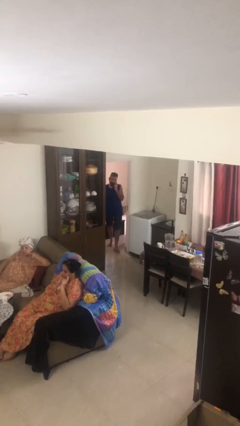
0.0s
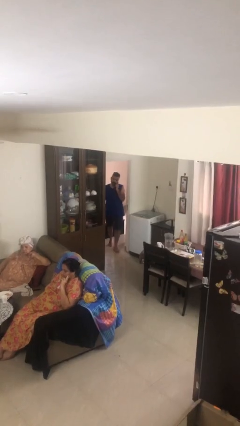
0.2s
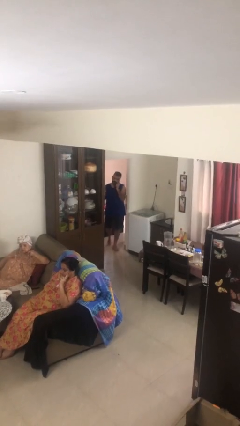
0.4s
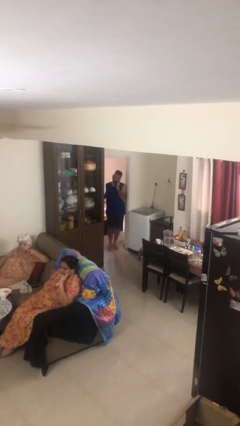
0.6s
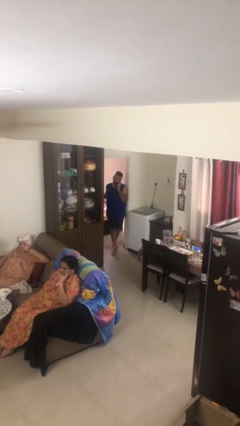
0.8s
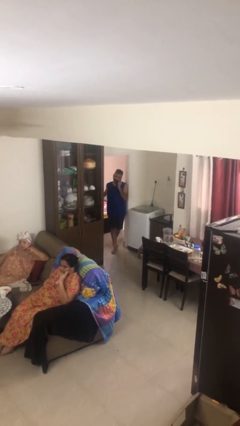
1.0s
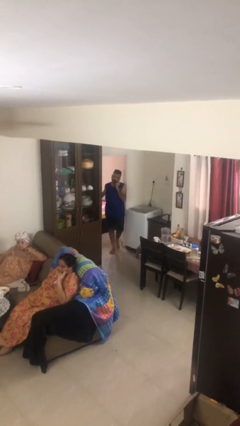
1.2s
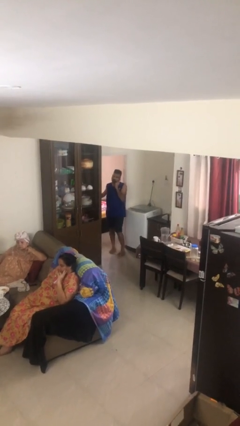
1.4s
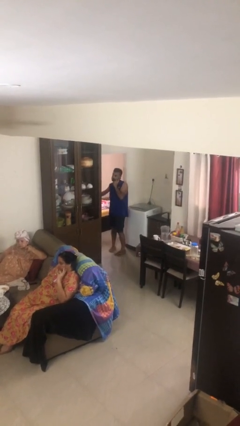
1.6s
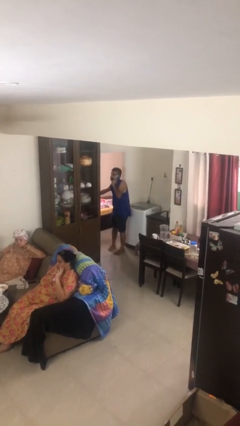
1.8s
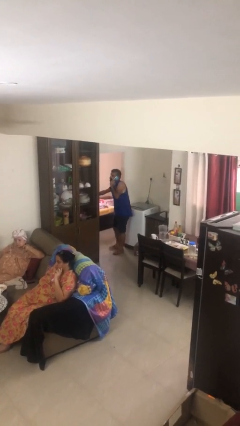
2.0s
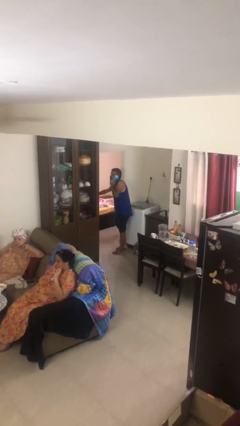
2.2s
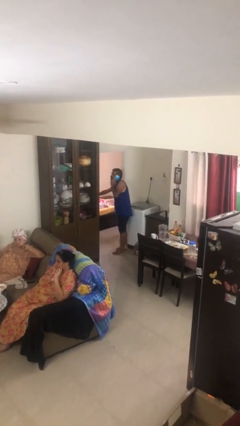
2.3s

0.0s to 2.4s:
person enters scene through structure

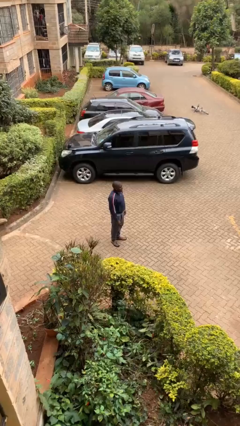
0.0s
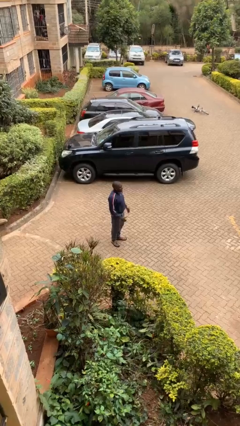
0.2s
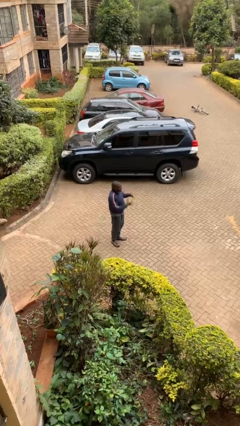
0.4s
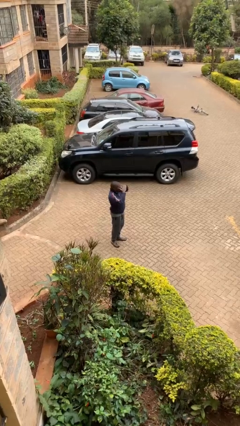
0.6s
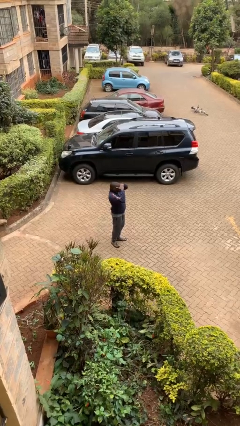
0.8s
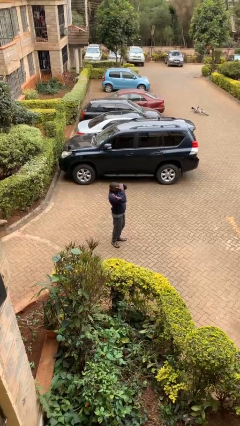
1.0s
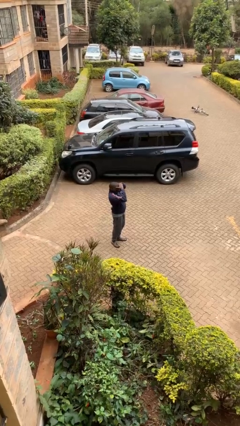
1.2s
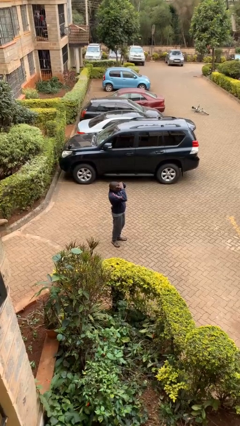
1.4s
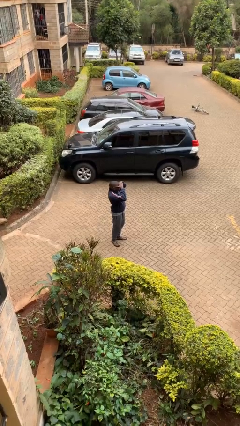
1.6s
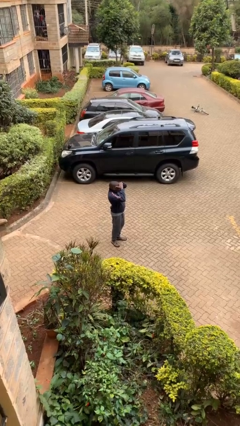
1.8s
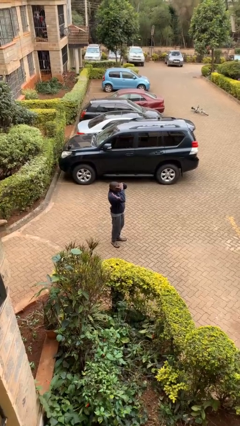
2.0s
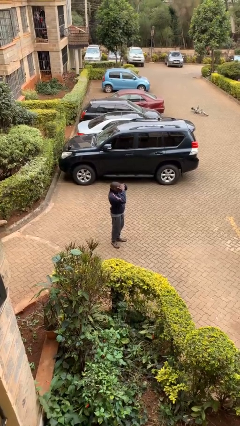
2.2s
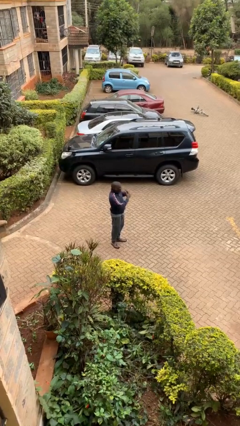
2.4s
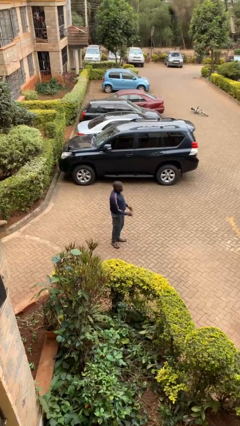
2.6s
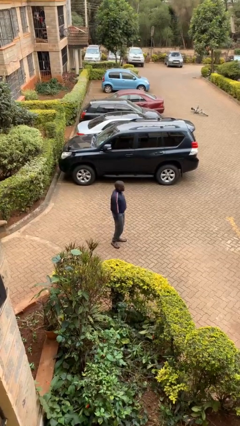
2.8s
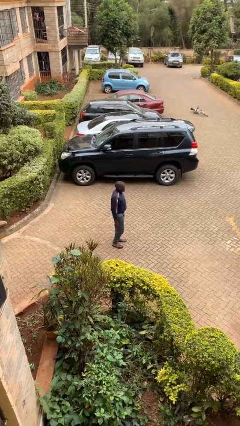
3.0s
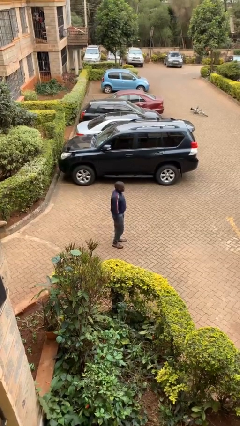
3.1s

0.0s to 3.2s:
person shades eyes

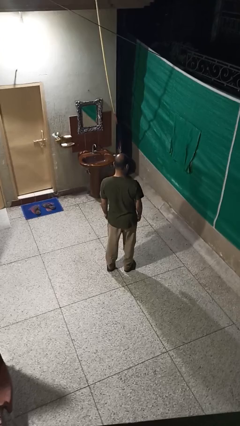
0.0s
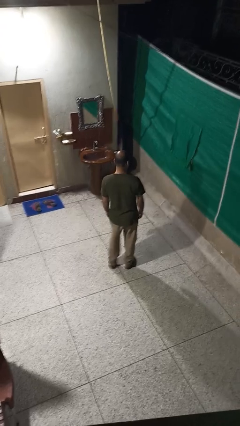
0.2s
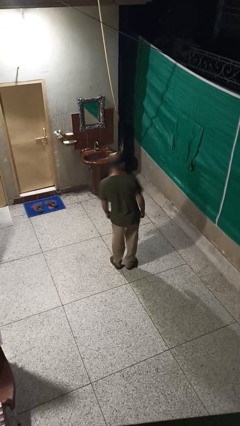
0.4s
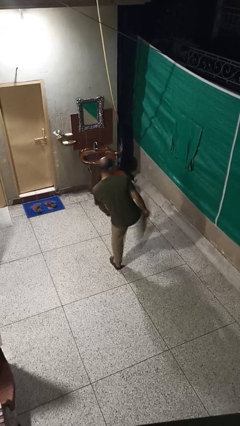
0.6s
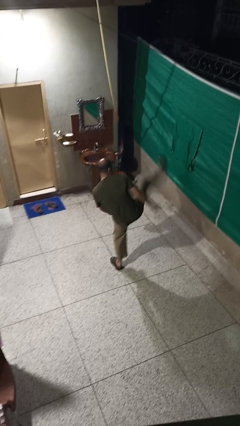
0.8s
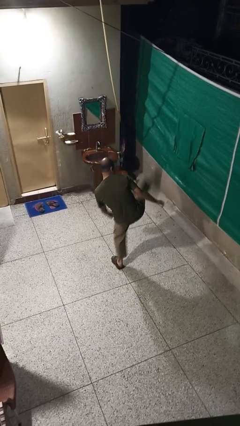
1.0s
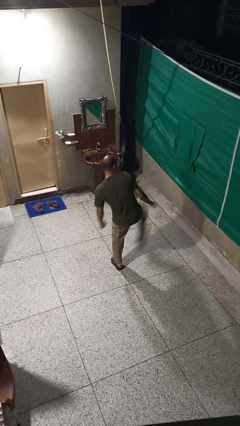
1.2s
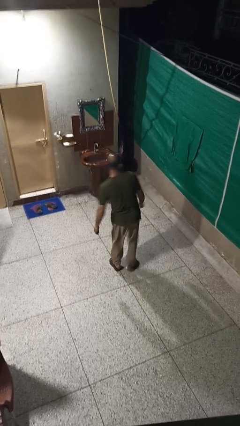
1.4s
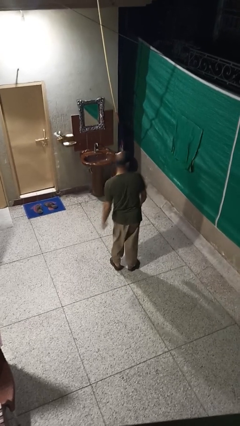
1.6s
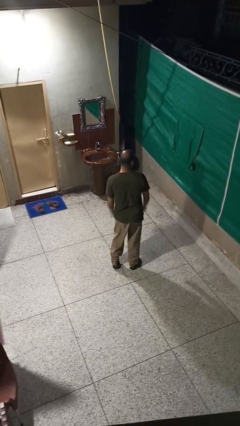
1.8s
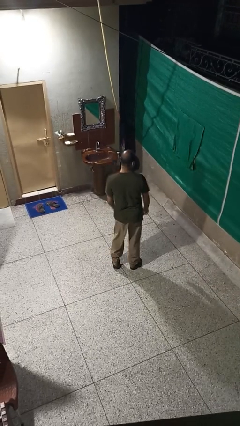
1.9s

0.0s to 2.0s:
person karate kicks

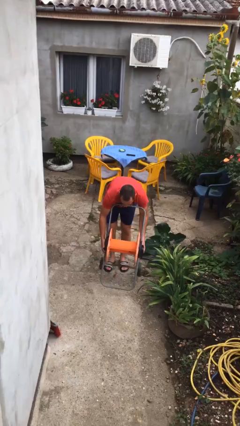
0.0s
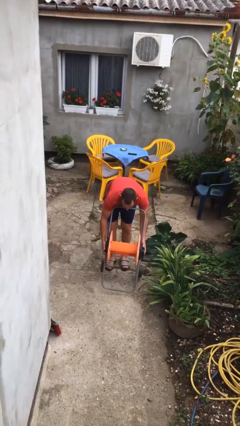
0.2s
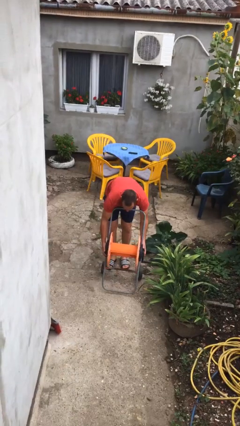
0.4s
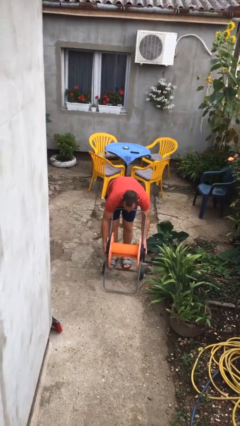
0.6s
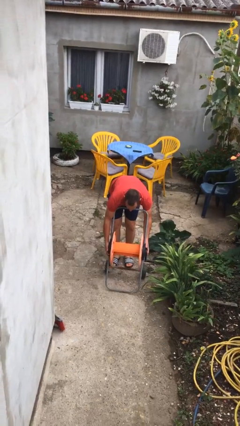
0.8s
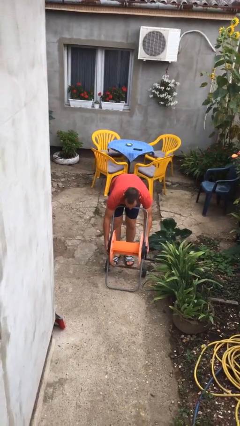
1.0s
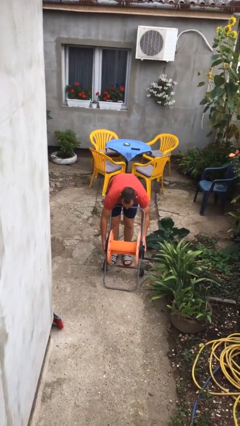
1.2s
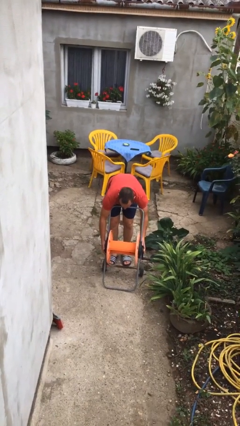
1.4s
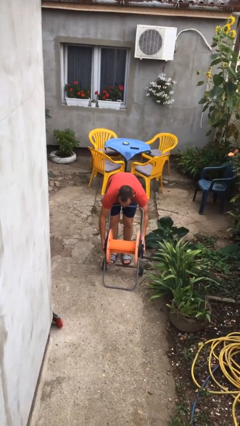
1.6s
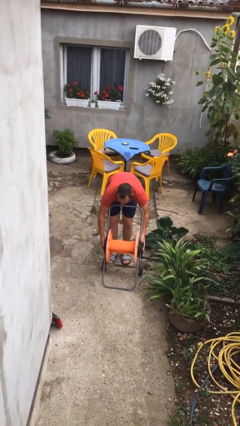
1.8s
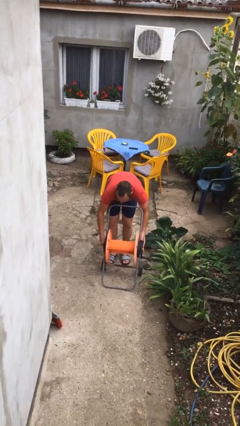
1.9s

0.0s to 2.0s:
person puts down object on floor

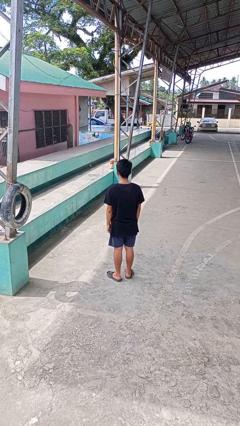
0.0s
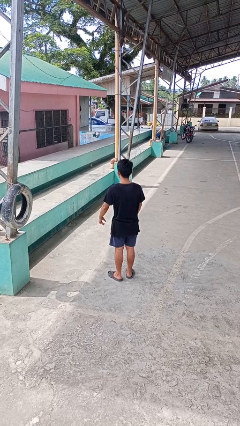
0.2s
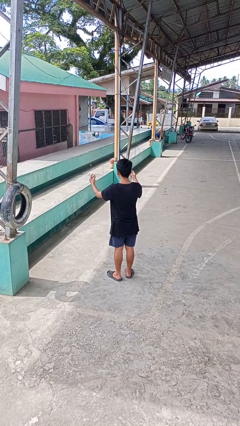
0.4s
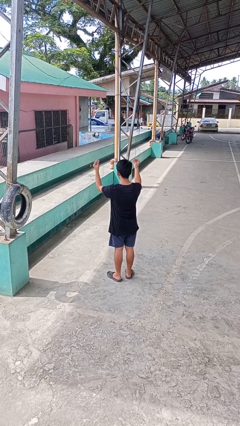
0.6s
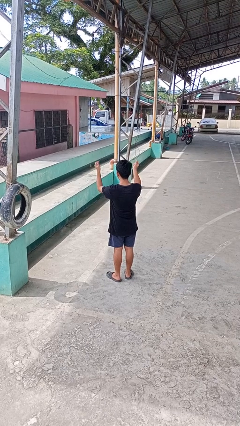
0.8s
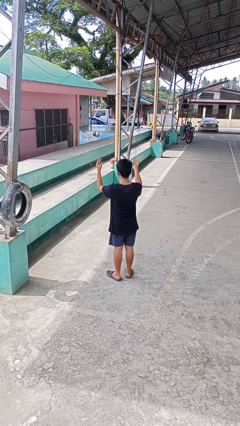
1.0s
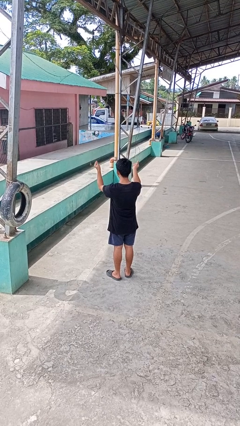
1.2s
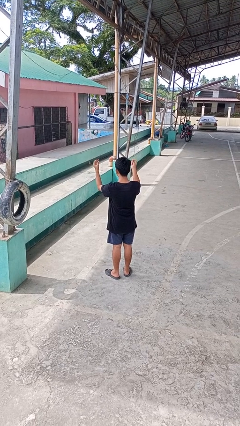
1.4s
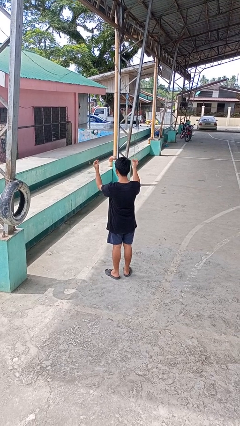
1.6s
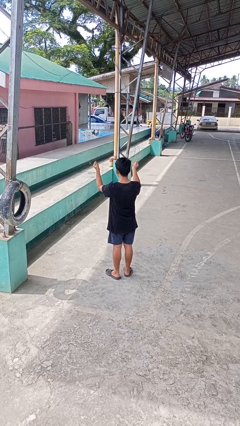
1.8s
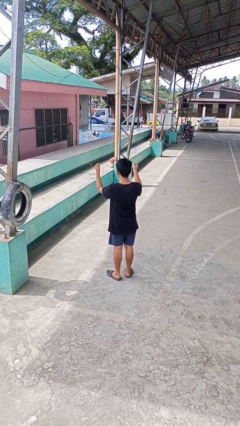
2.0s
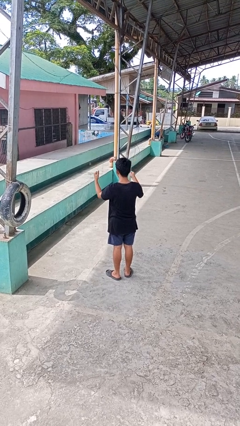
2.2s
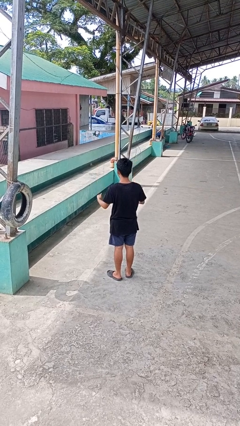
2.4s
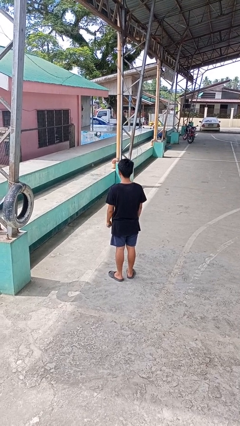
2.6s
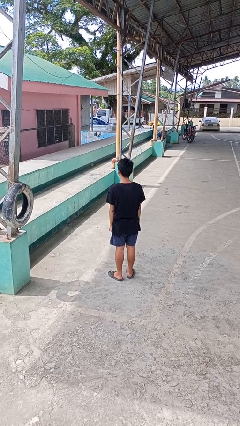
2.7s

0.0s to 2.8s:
person snaps fingers

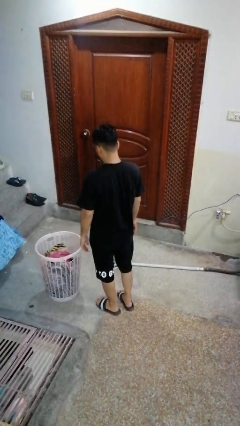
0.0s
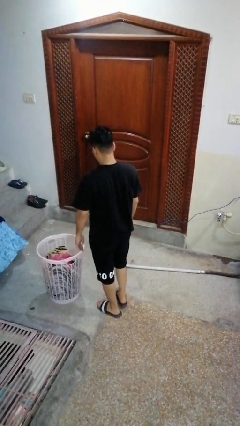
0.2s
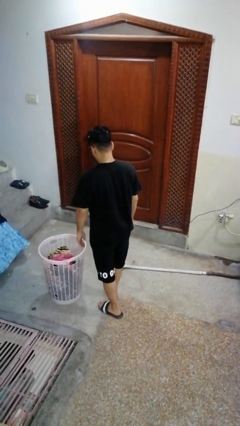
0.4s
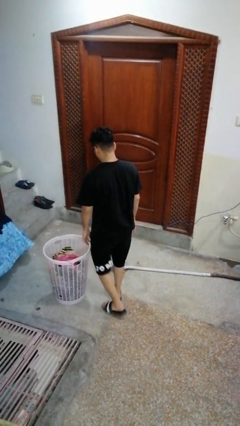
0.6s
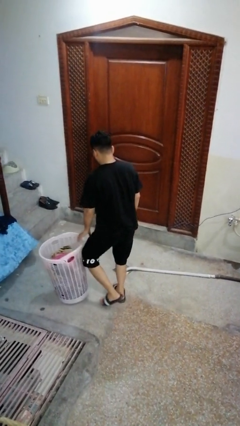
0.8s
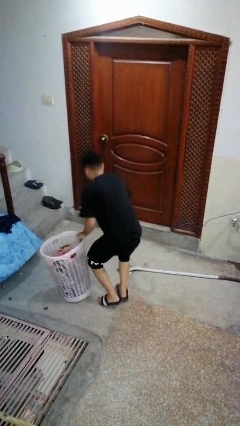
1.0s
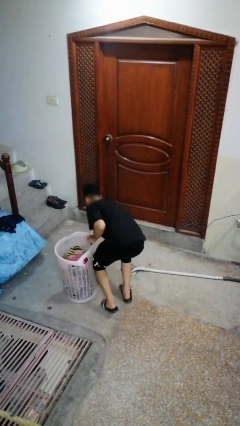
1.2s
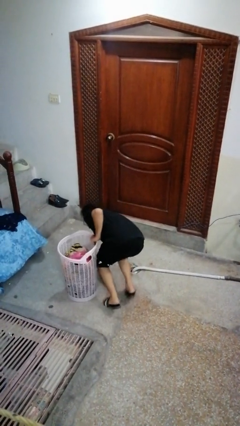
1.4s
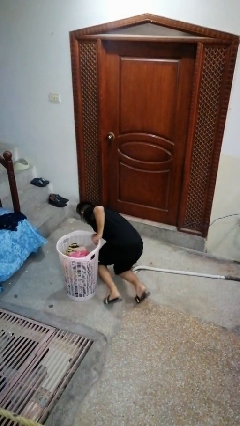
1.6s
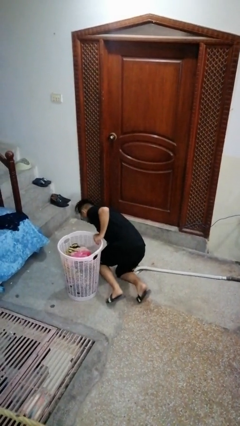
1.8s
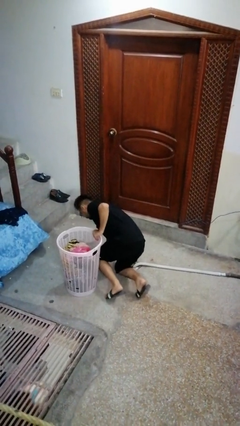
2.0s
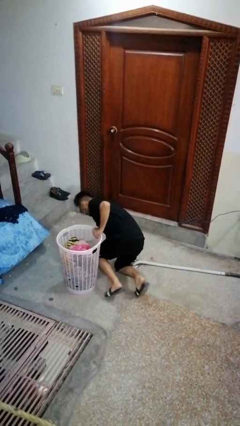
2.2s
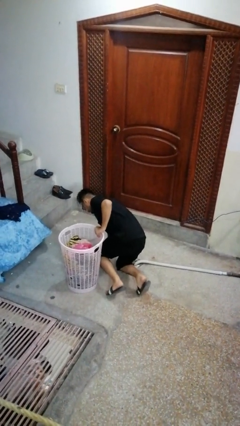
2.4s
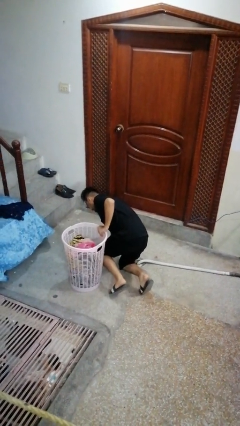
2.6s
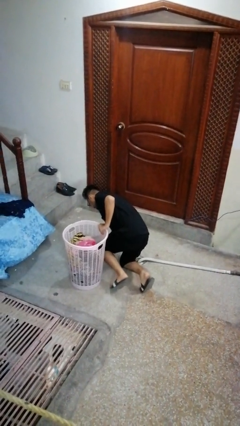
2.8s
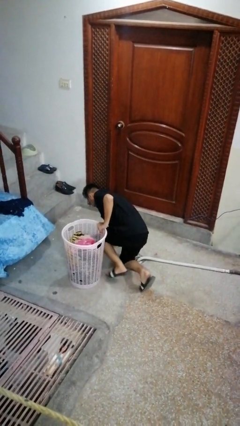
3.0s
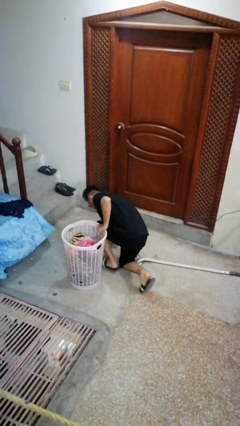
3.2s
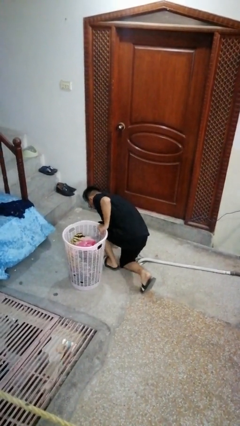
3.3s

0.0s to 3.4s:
person trips on object on floor

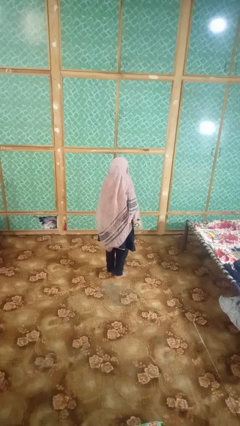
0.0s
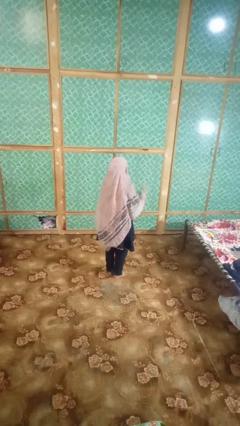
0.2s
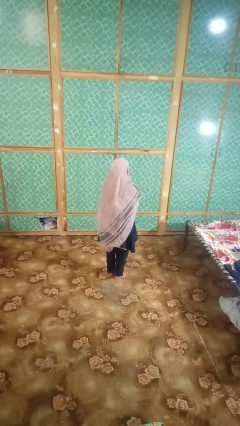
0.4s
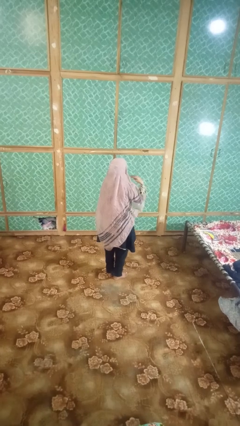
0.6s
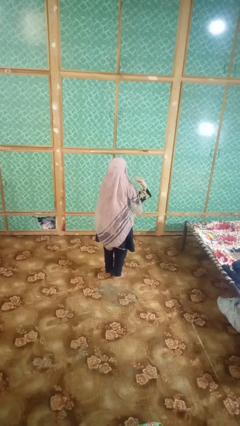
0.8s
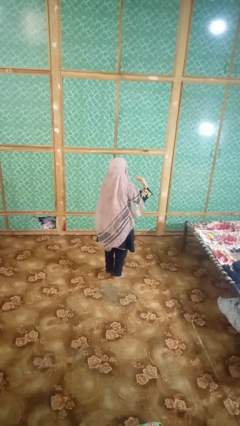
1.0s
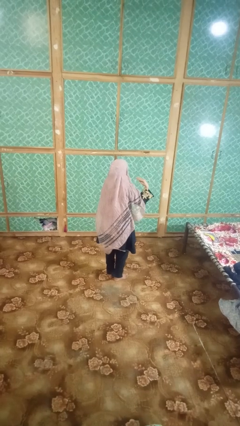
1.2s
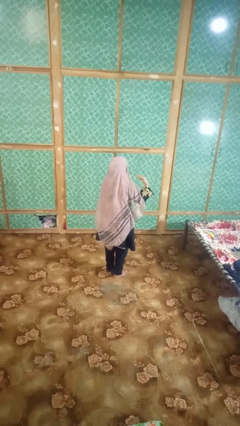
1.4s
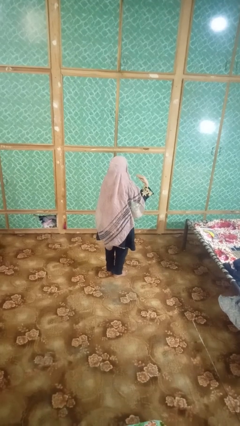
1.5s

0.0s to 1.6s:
person gestures cut
